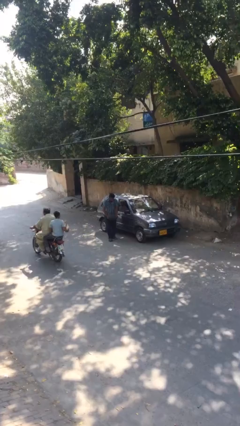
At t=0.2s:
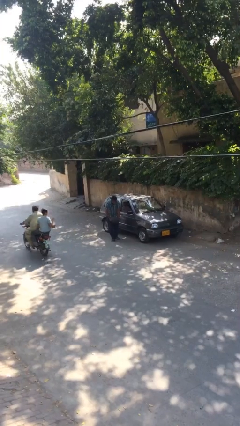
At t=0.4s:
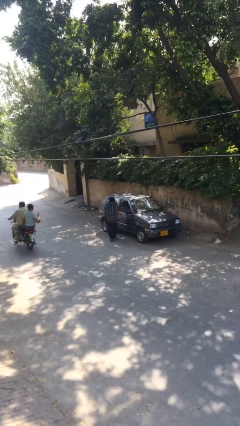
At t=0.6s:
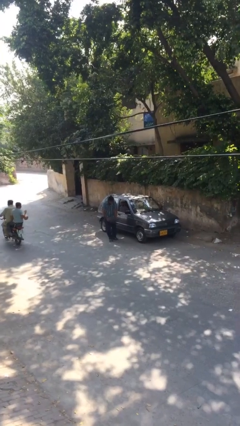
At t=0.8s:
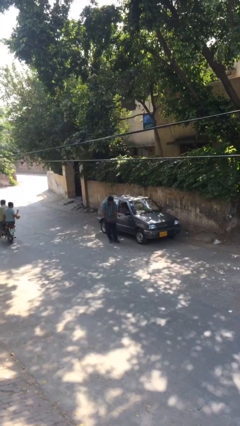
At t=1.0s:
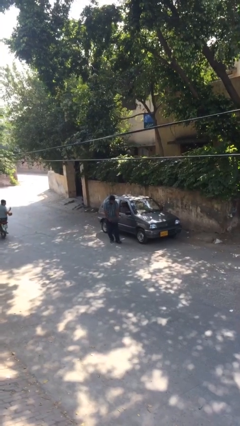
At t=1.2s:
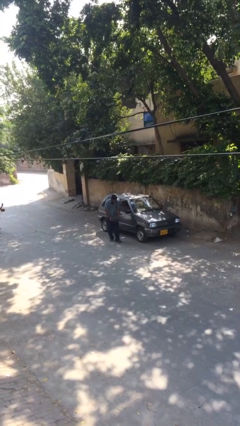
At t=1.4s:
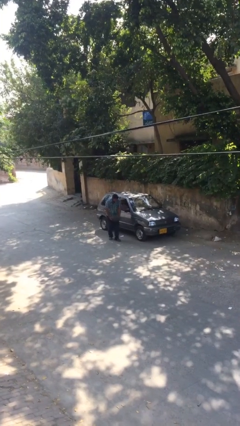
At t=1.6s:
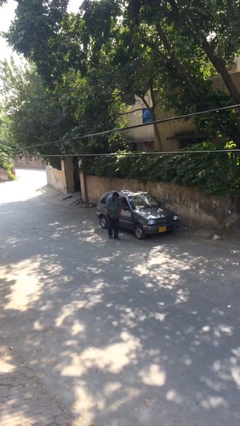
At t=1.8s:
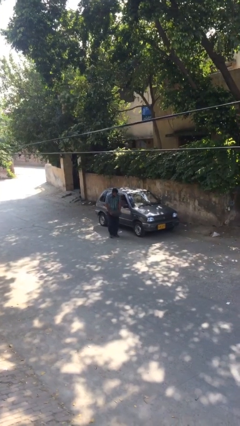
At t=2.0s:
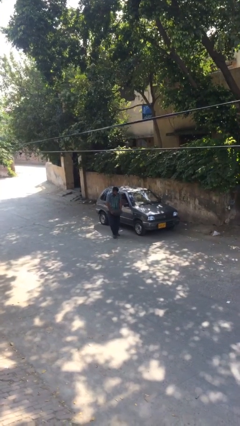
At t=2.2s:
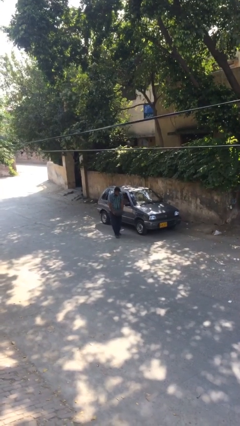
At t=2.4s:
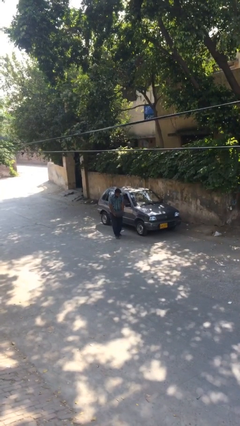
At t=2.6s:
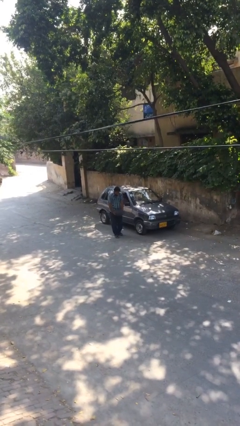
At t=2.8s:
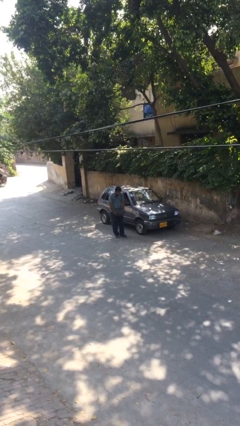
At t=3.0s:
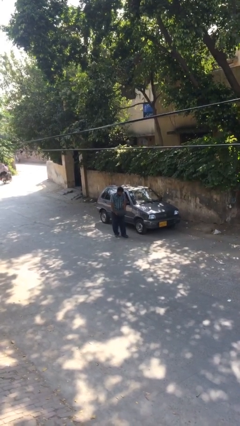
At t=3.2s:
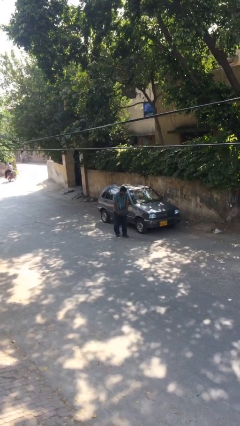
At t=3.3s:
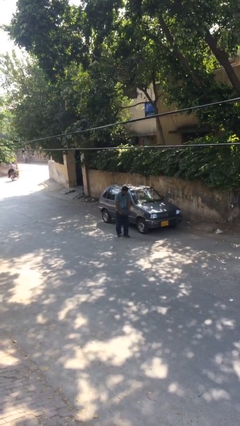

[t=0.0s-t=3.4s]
person carries heavy object

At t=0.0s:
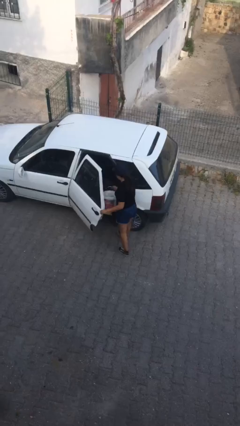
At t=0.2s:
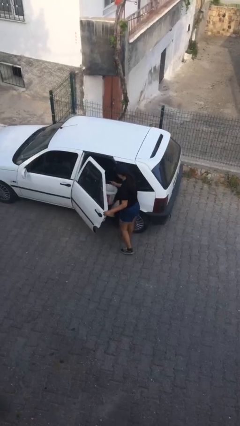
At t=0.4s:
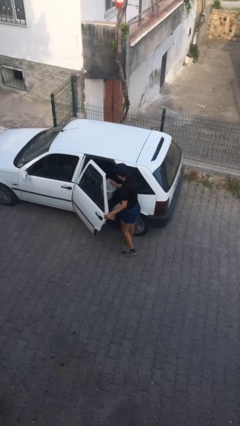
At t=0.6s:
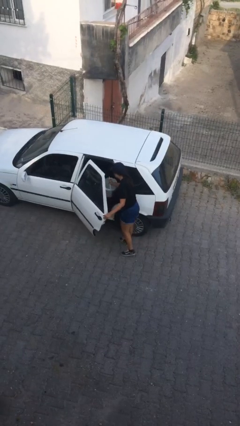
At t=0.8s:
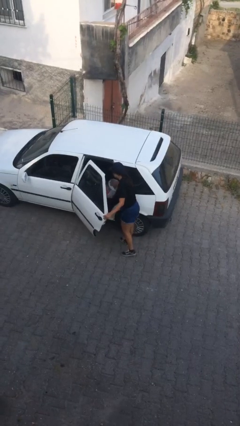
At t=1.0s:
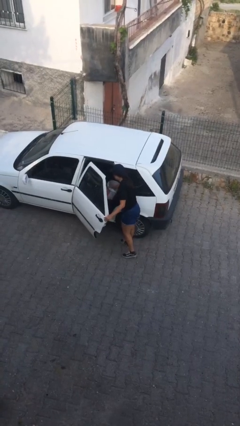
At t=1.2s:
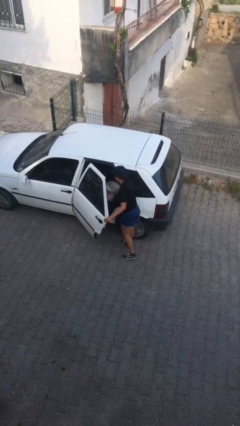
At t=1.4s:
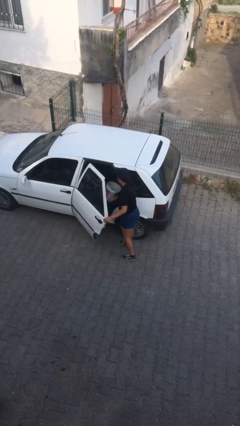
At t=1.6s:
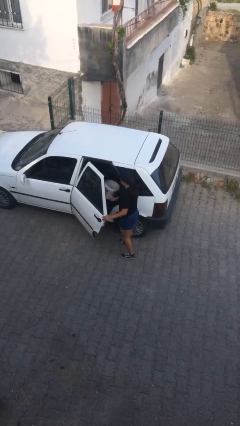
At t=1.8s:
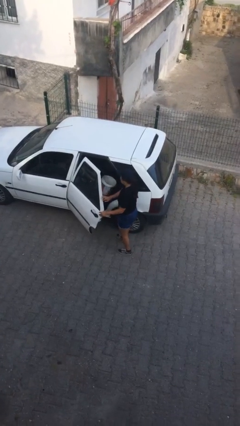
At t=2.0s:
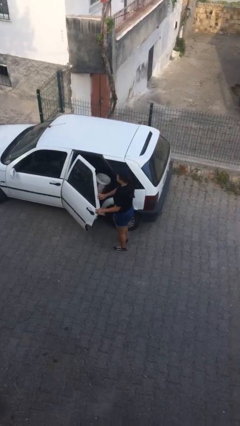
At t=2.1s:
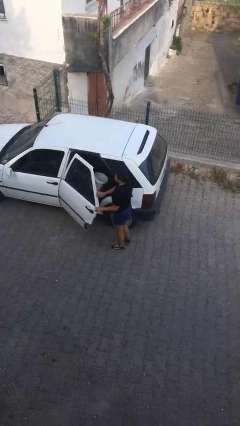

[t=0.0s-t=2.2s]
person loads car

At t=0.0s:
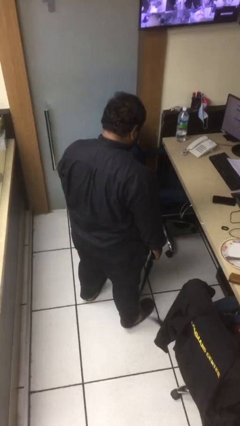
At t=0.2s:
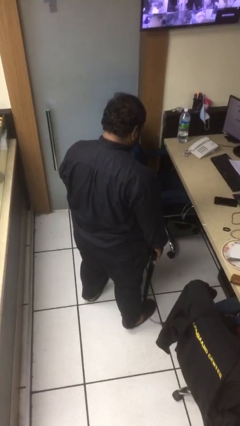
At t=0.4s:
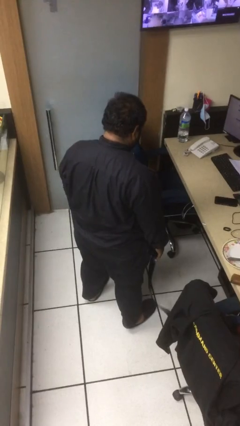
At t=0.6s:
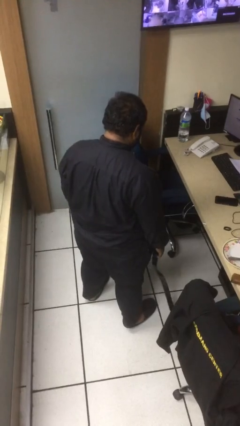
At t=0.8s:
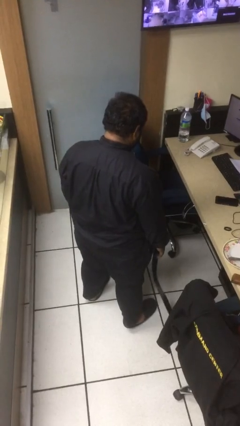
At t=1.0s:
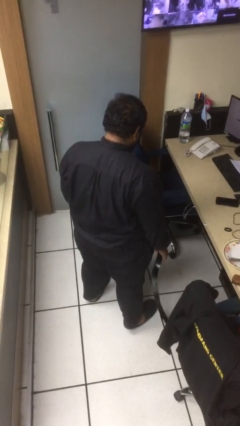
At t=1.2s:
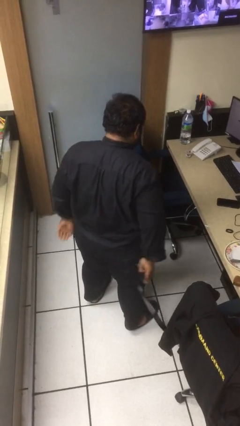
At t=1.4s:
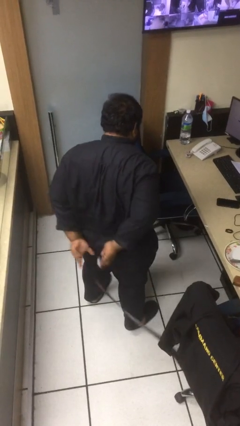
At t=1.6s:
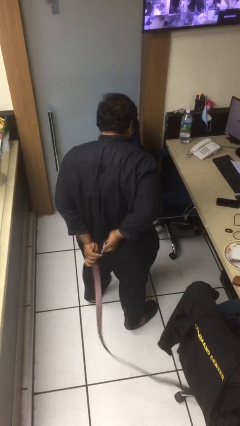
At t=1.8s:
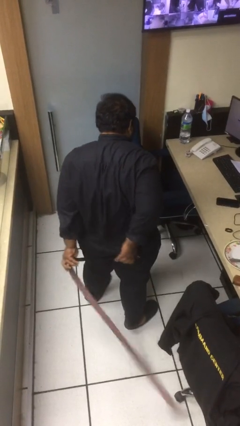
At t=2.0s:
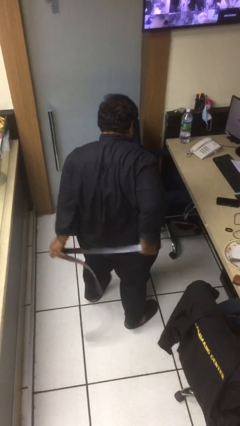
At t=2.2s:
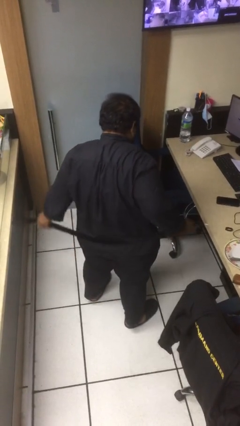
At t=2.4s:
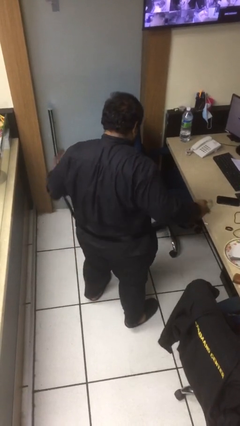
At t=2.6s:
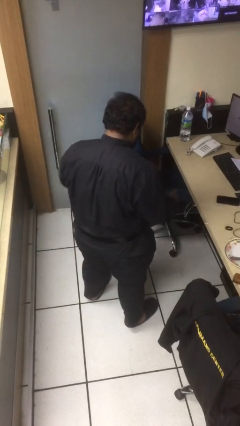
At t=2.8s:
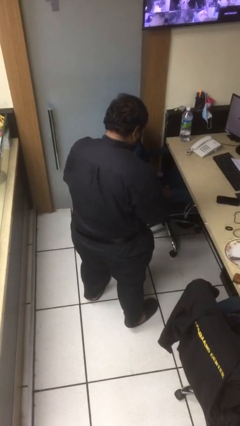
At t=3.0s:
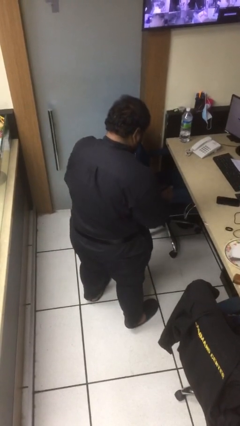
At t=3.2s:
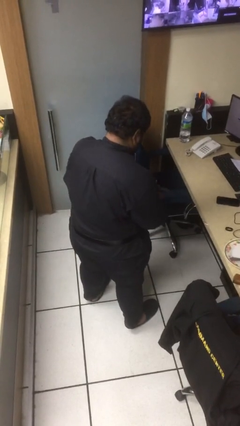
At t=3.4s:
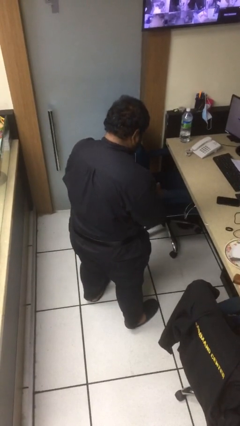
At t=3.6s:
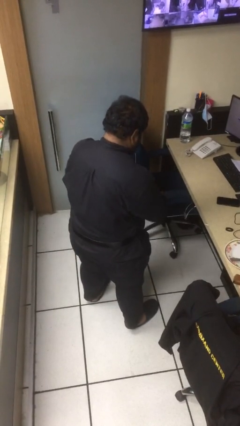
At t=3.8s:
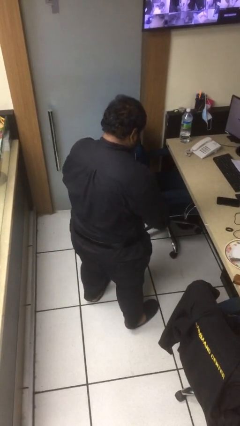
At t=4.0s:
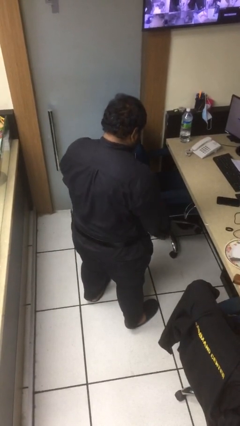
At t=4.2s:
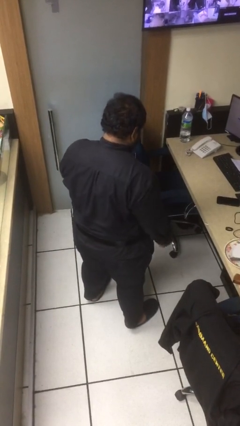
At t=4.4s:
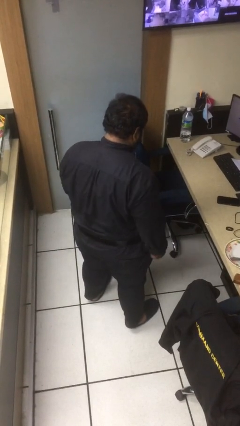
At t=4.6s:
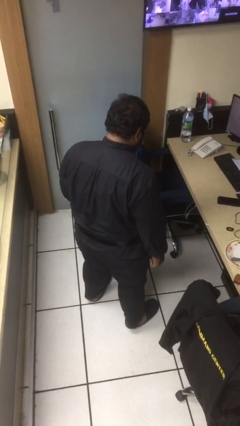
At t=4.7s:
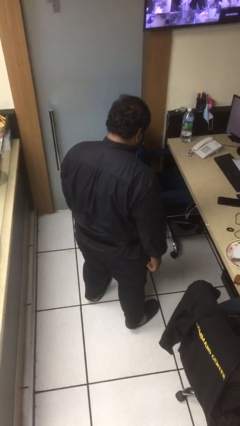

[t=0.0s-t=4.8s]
person puts on belt

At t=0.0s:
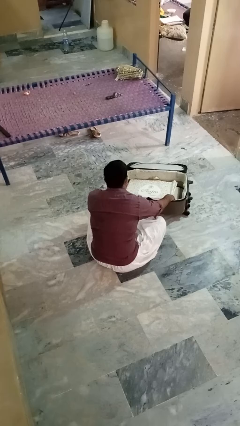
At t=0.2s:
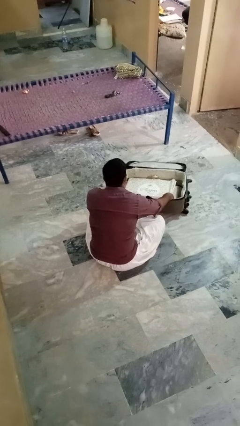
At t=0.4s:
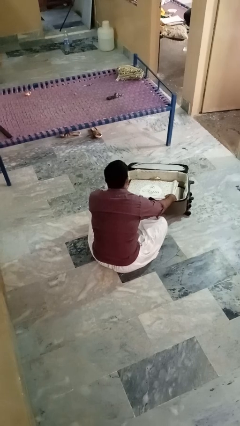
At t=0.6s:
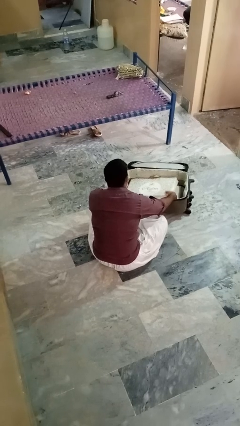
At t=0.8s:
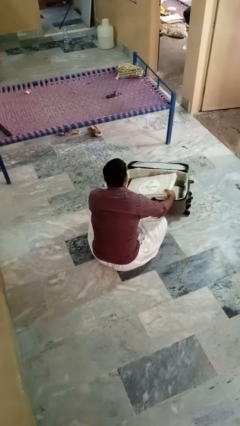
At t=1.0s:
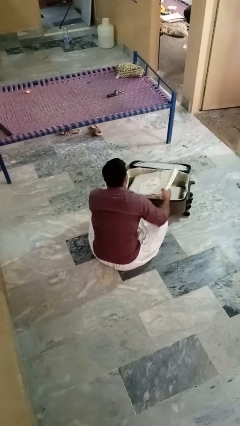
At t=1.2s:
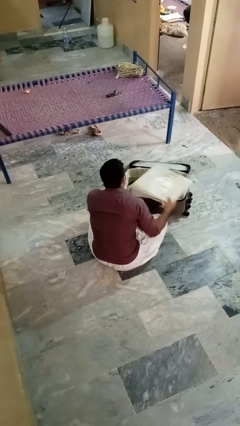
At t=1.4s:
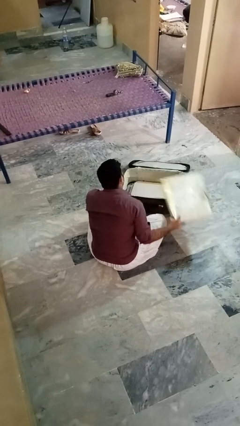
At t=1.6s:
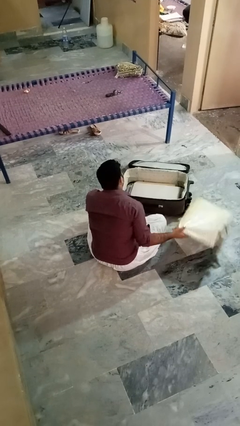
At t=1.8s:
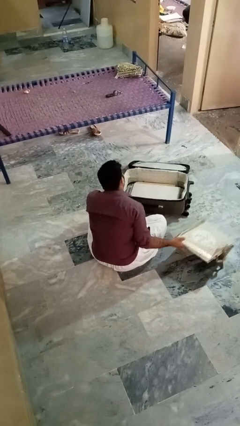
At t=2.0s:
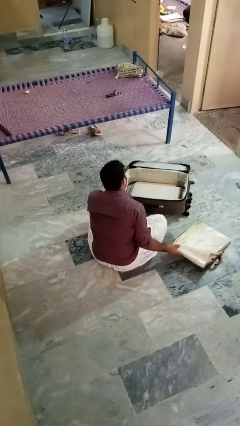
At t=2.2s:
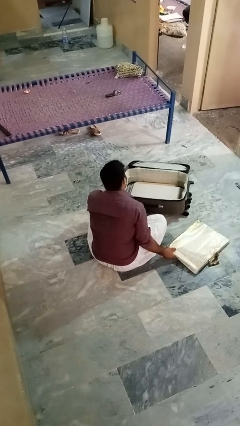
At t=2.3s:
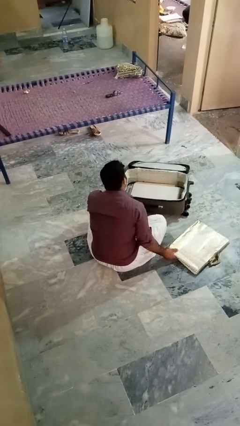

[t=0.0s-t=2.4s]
person takes object from bag

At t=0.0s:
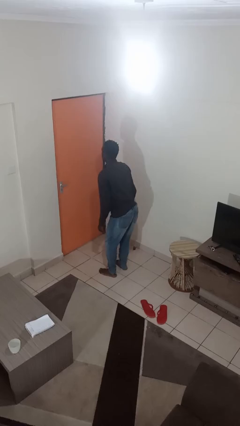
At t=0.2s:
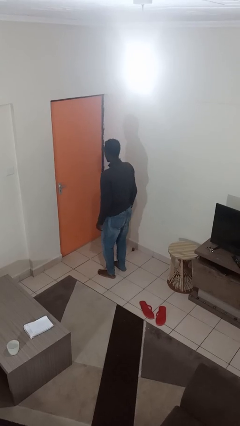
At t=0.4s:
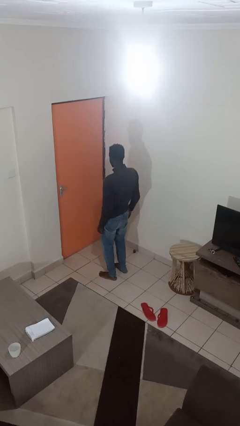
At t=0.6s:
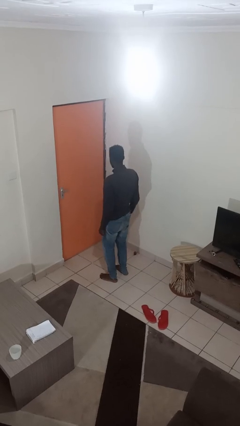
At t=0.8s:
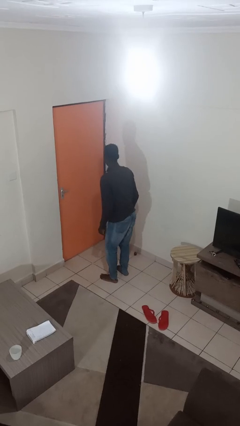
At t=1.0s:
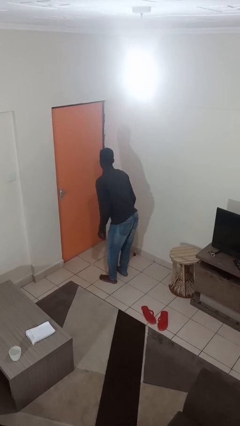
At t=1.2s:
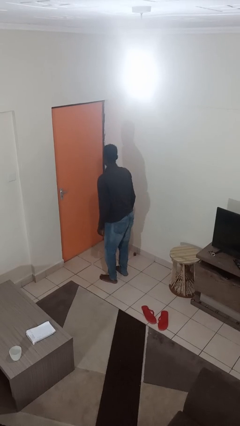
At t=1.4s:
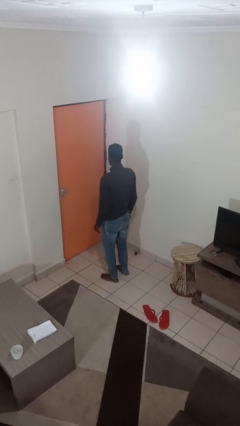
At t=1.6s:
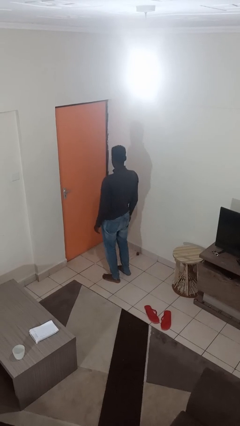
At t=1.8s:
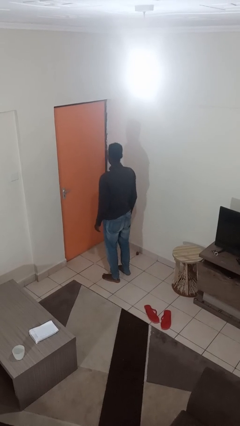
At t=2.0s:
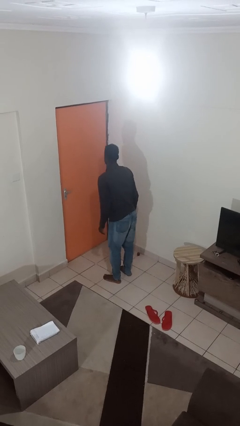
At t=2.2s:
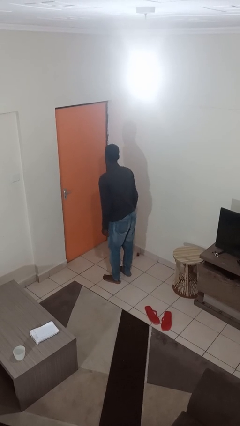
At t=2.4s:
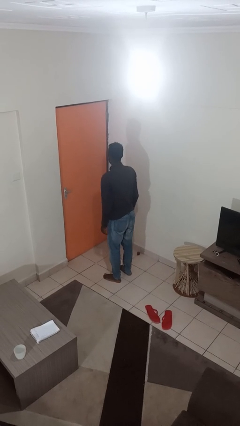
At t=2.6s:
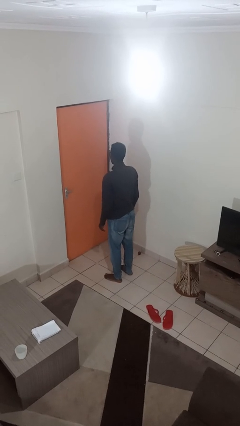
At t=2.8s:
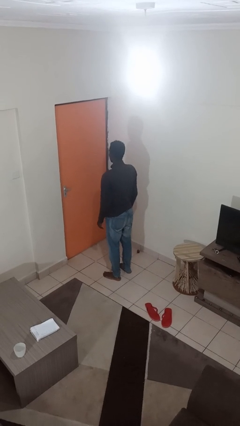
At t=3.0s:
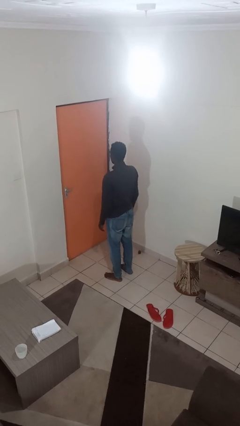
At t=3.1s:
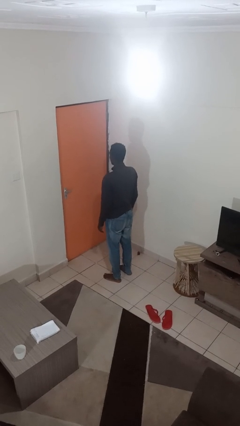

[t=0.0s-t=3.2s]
person wiggles hips

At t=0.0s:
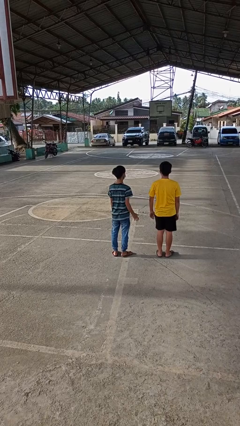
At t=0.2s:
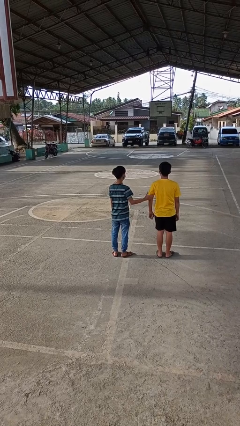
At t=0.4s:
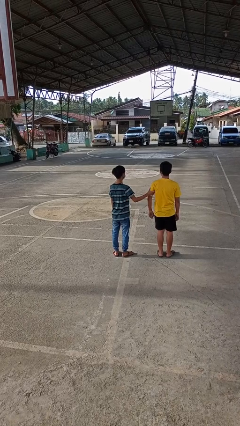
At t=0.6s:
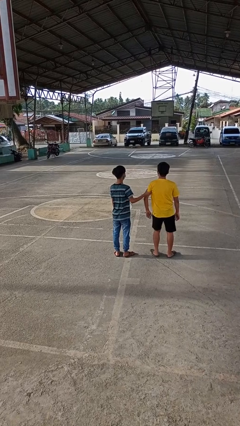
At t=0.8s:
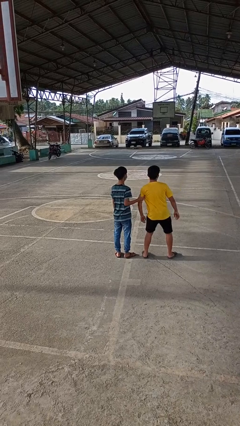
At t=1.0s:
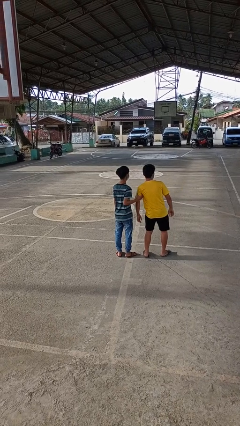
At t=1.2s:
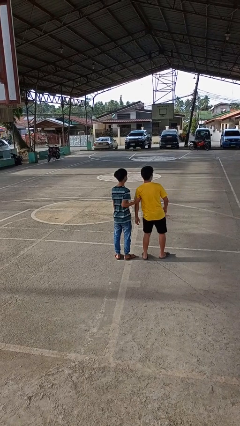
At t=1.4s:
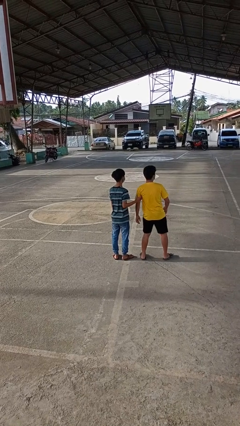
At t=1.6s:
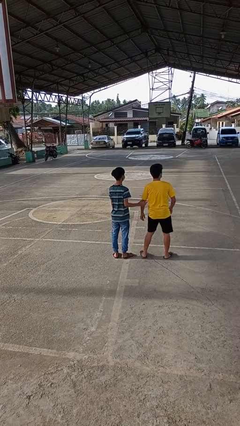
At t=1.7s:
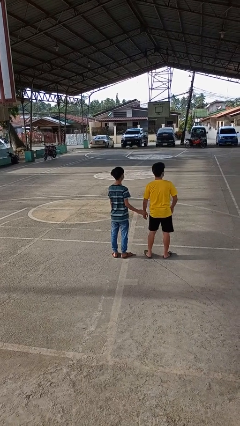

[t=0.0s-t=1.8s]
person grabs person by bicep
